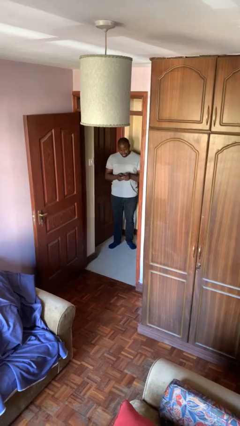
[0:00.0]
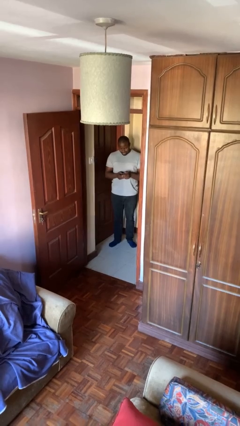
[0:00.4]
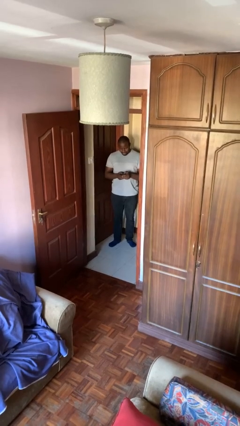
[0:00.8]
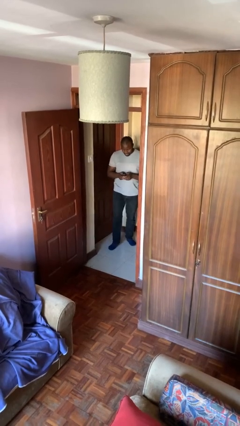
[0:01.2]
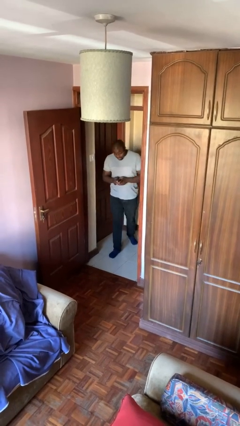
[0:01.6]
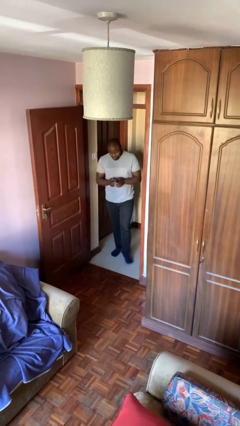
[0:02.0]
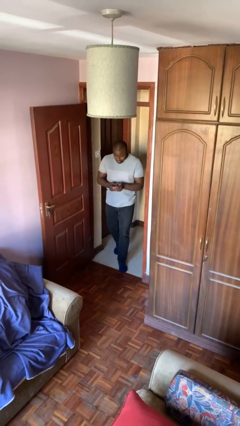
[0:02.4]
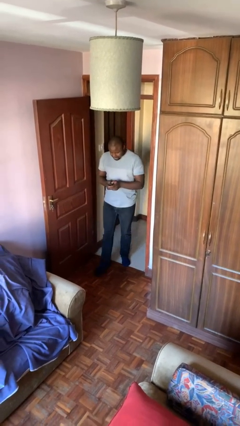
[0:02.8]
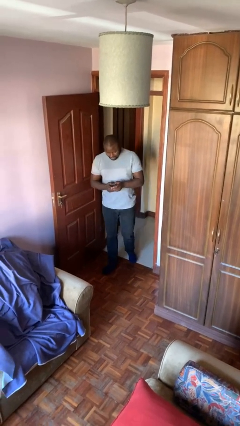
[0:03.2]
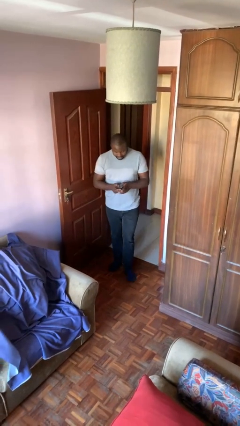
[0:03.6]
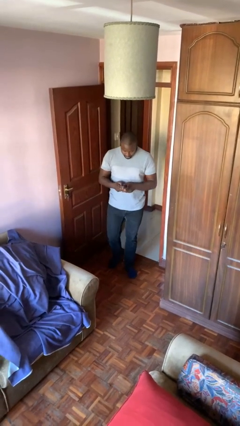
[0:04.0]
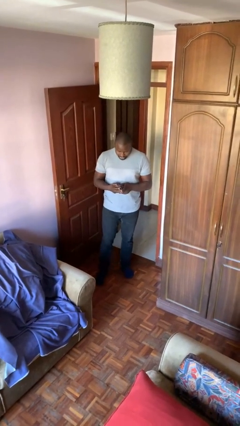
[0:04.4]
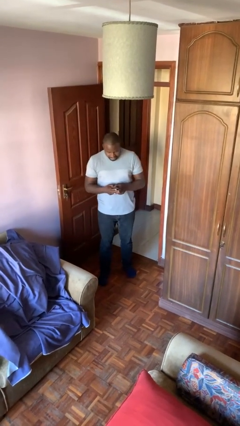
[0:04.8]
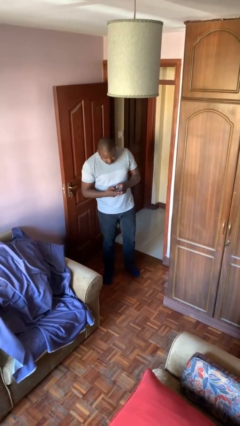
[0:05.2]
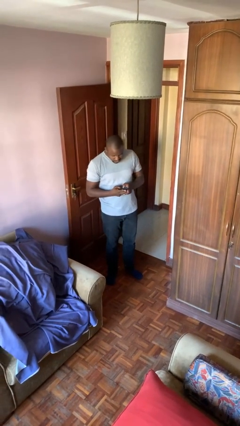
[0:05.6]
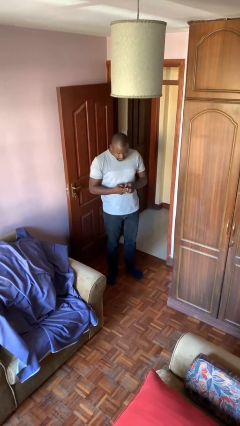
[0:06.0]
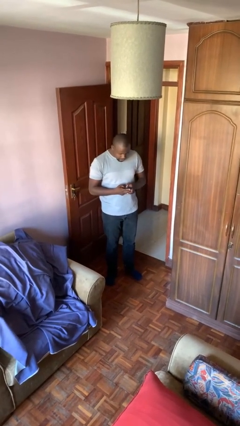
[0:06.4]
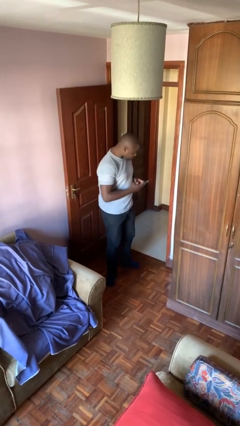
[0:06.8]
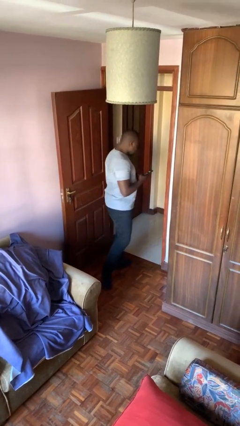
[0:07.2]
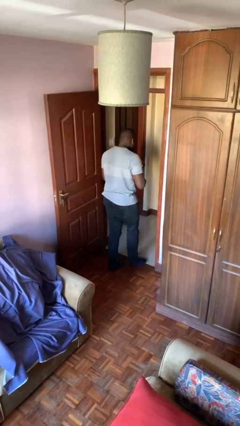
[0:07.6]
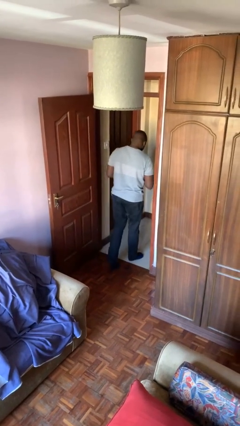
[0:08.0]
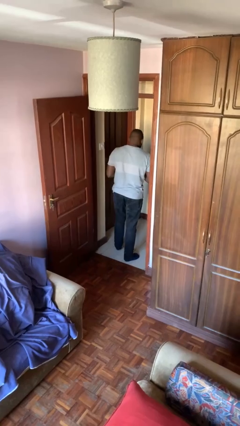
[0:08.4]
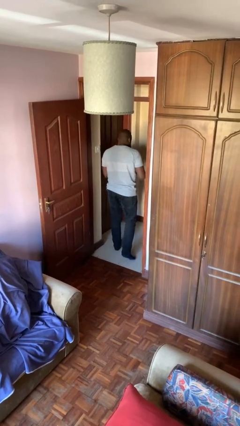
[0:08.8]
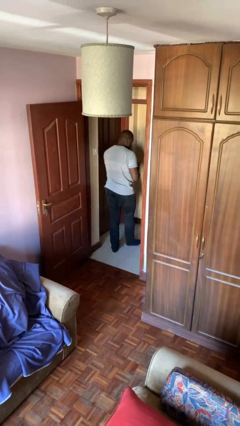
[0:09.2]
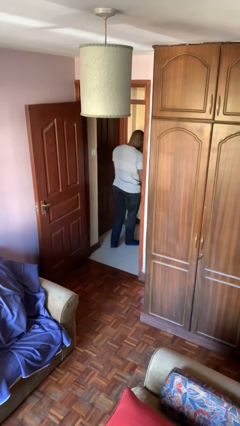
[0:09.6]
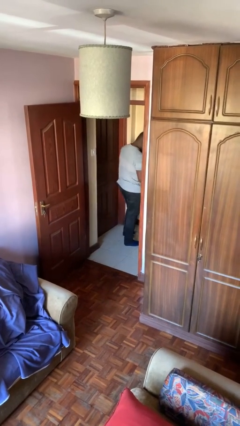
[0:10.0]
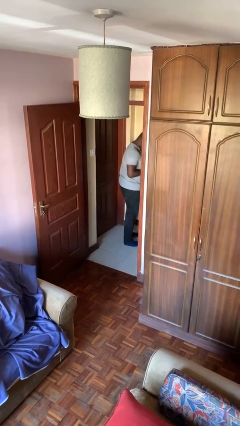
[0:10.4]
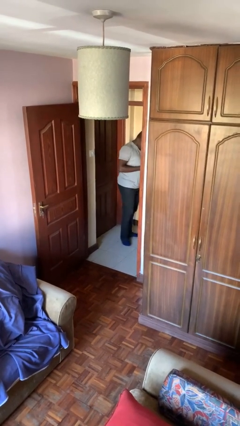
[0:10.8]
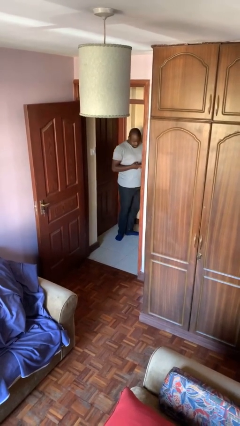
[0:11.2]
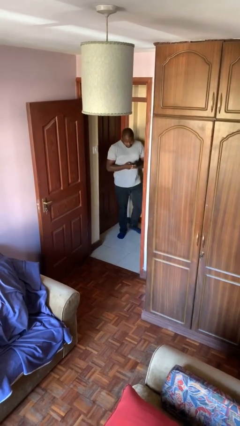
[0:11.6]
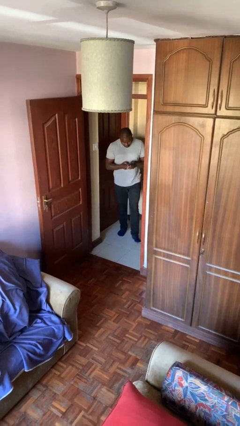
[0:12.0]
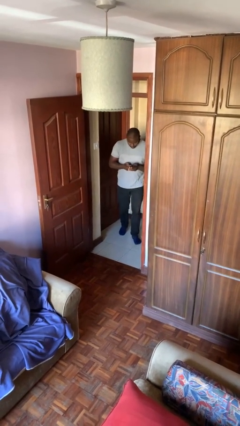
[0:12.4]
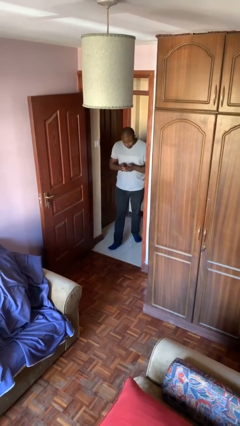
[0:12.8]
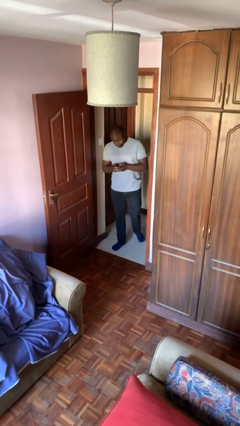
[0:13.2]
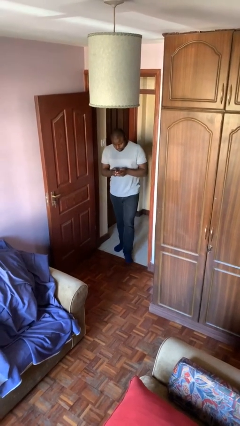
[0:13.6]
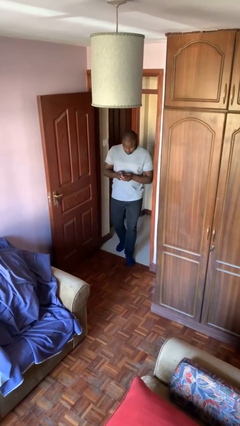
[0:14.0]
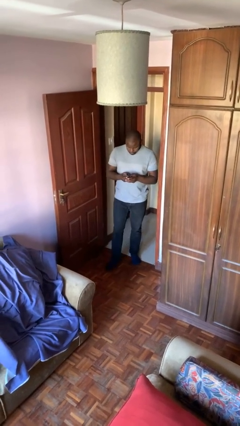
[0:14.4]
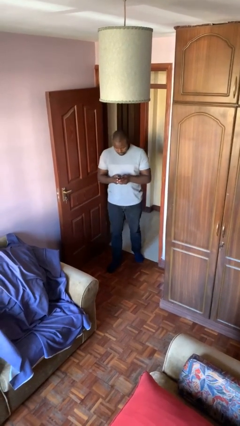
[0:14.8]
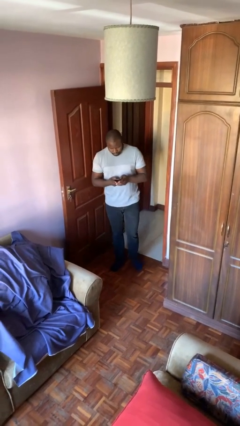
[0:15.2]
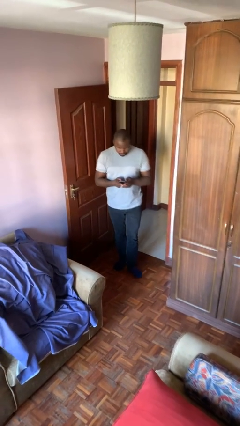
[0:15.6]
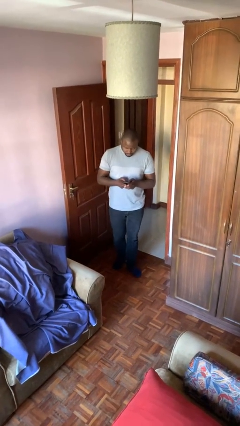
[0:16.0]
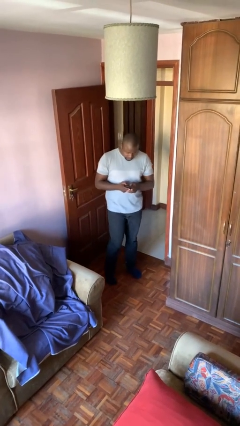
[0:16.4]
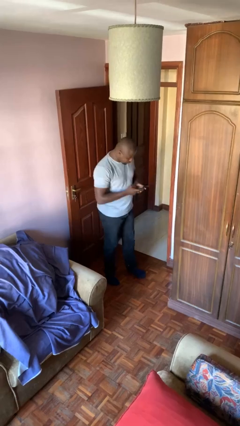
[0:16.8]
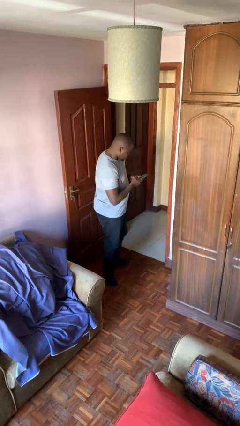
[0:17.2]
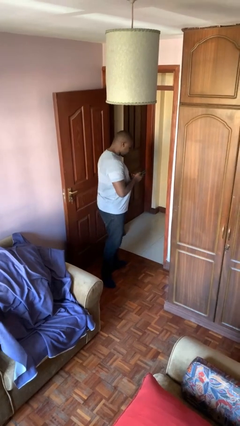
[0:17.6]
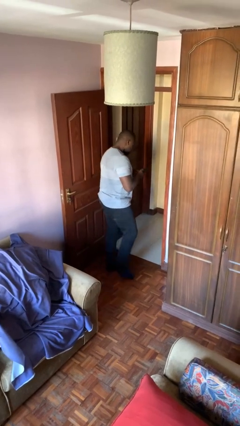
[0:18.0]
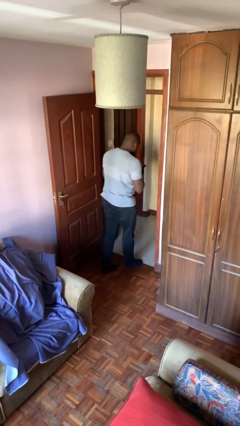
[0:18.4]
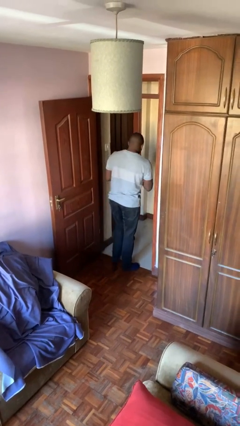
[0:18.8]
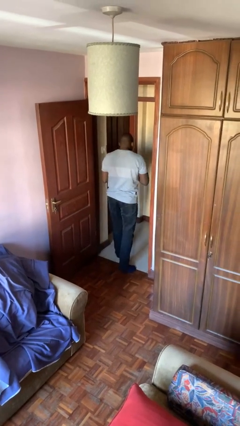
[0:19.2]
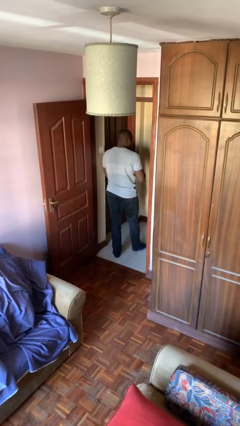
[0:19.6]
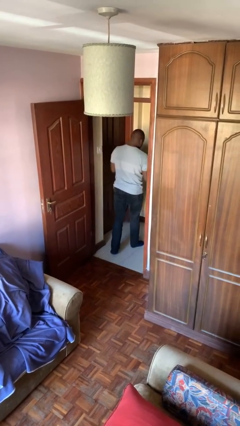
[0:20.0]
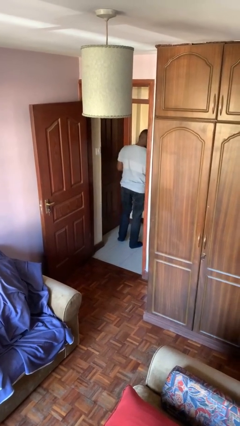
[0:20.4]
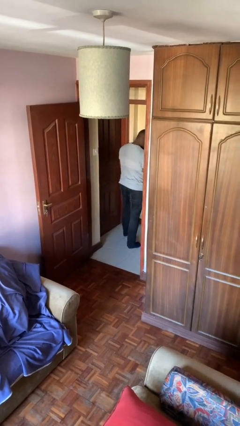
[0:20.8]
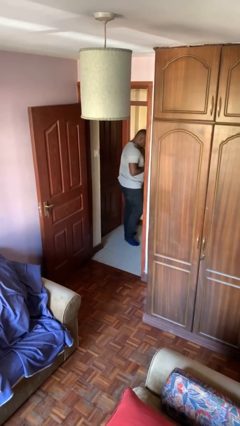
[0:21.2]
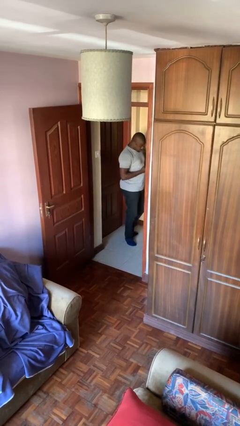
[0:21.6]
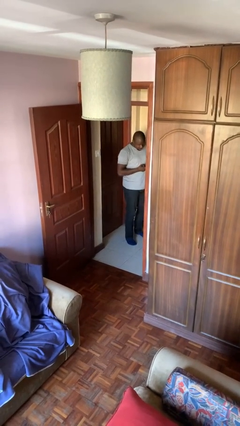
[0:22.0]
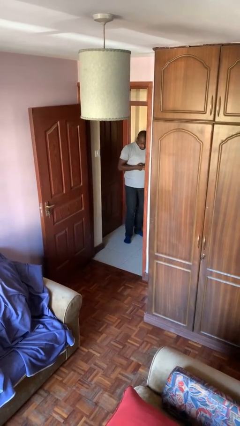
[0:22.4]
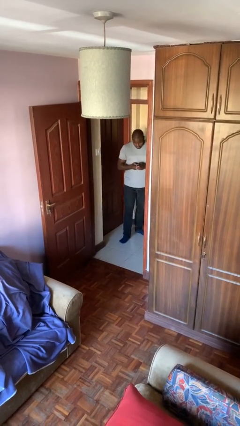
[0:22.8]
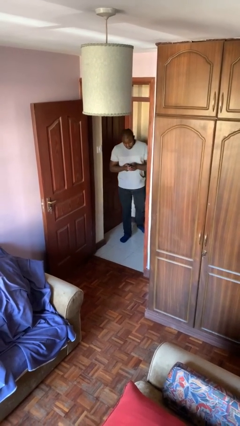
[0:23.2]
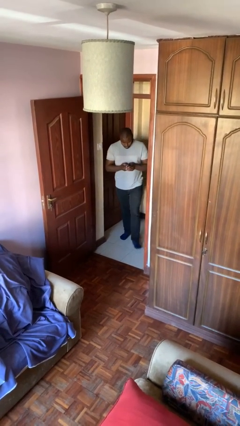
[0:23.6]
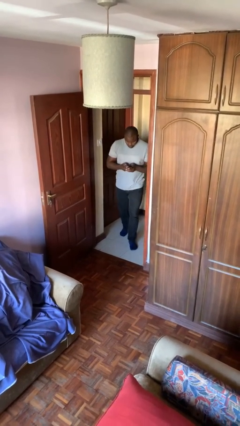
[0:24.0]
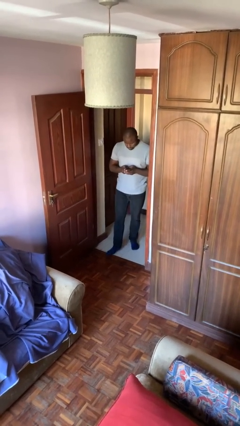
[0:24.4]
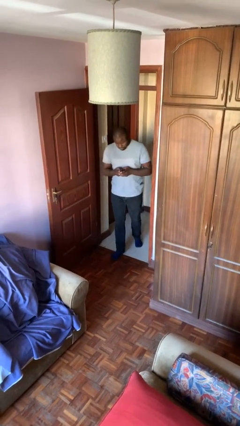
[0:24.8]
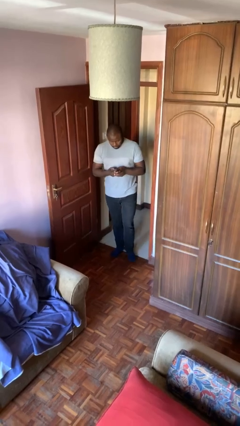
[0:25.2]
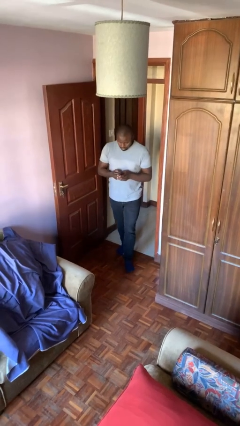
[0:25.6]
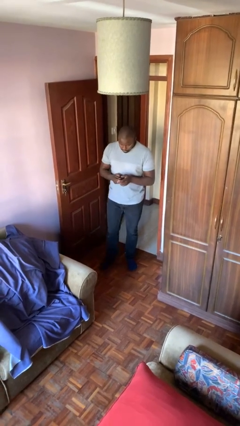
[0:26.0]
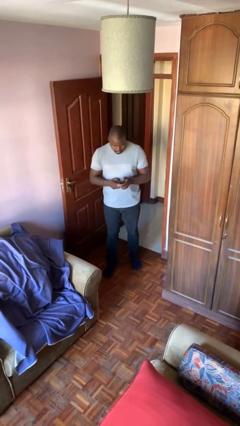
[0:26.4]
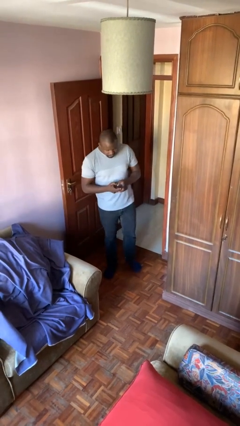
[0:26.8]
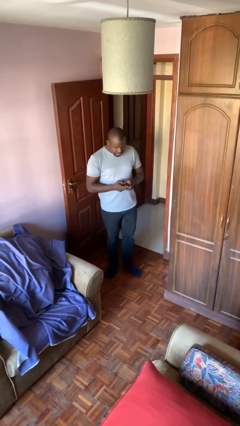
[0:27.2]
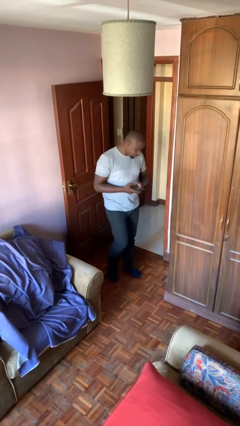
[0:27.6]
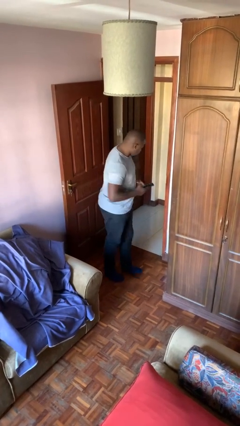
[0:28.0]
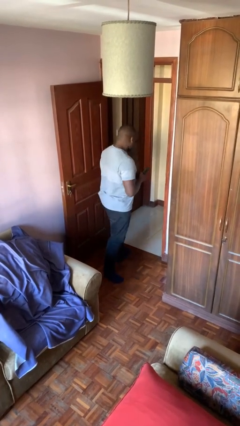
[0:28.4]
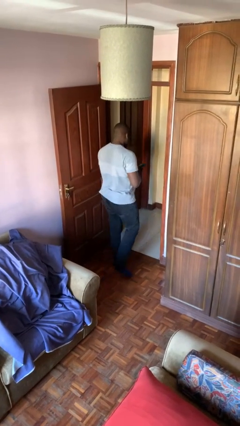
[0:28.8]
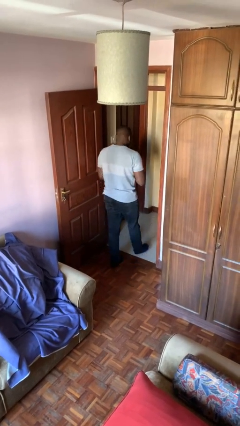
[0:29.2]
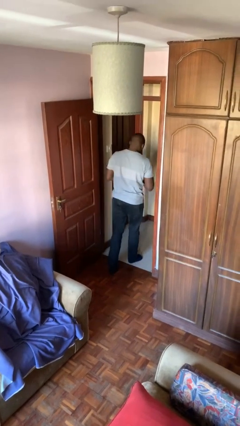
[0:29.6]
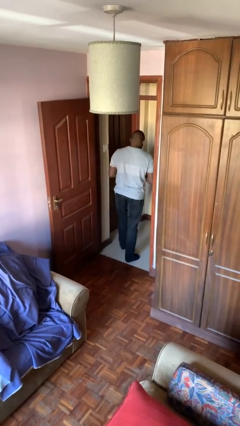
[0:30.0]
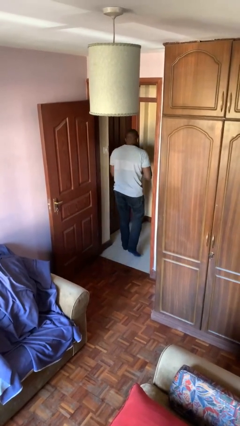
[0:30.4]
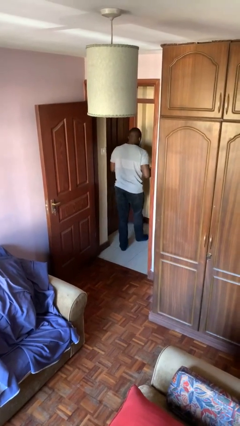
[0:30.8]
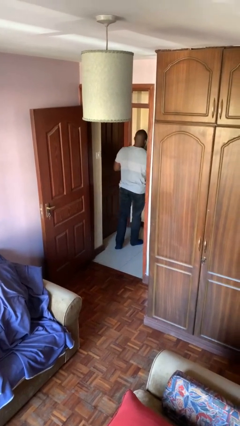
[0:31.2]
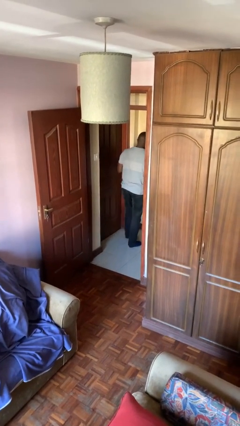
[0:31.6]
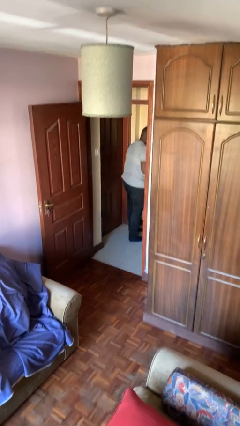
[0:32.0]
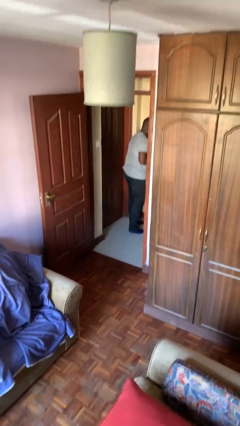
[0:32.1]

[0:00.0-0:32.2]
person texts on phone

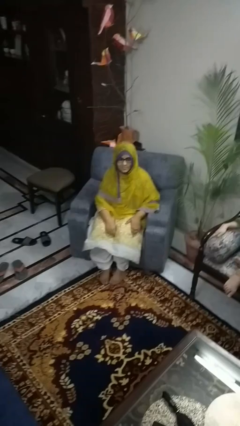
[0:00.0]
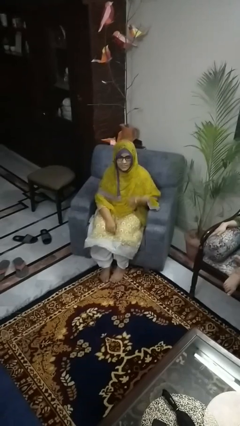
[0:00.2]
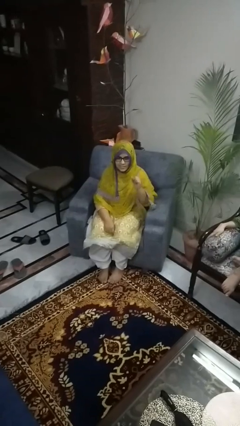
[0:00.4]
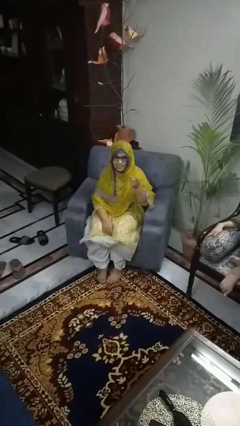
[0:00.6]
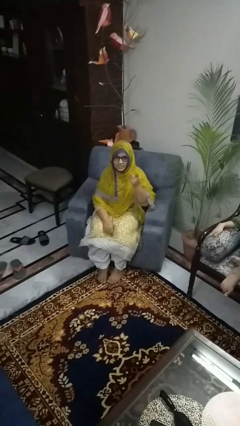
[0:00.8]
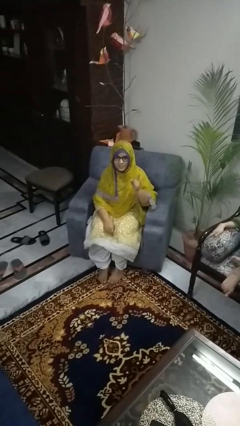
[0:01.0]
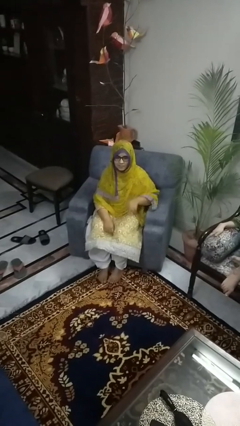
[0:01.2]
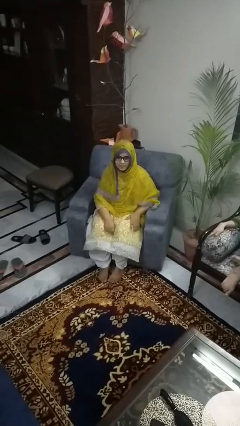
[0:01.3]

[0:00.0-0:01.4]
person gestures number one

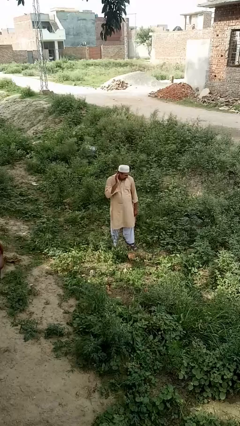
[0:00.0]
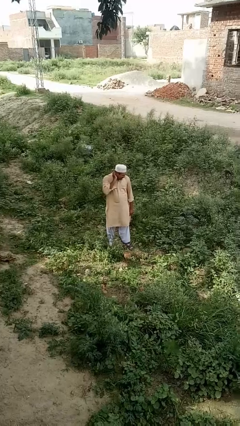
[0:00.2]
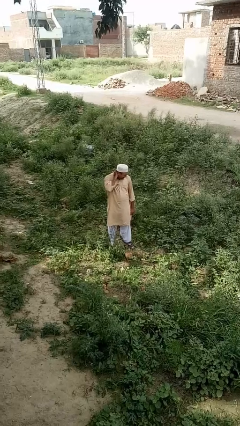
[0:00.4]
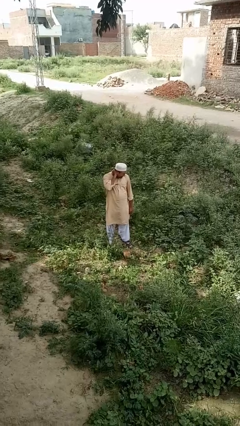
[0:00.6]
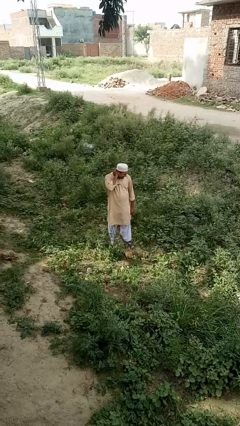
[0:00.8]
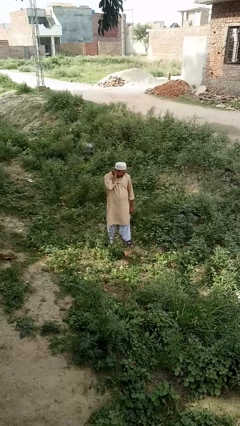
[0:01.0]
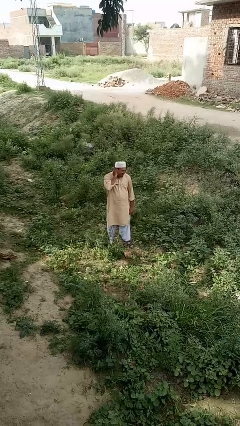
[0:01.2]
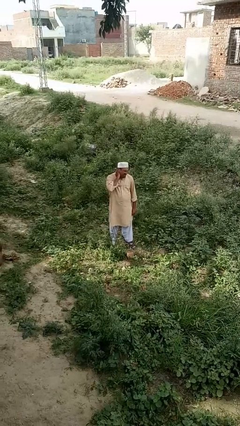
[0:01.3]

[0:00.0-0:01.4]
person rubs neck
